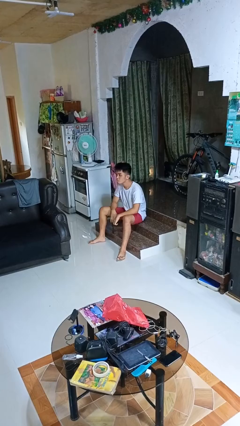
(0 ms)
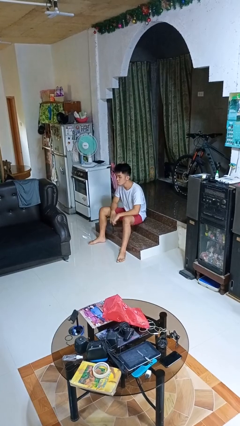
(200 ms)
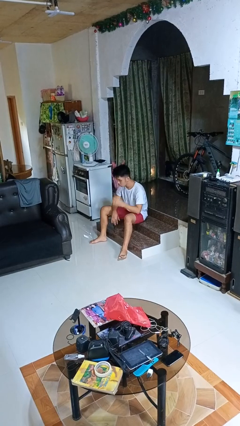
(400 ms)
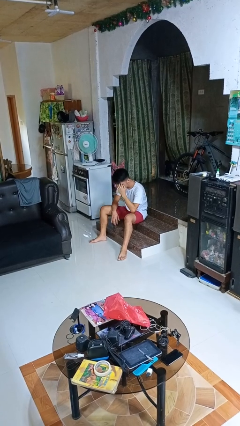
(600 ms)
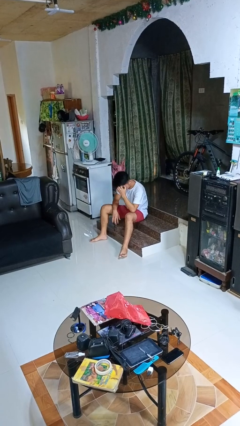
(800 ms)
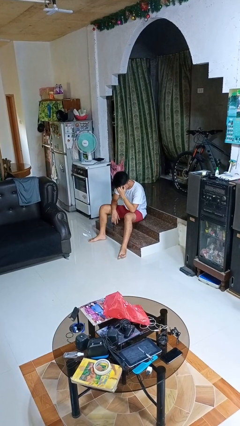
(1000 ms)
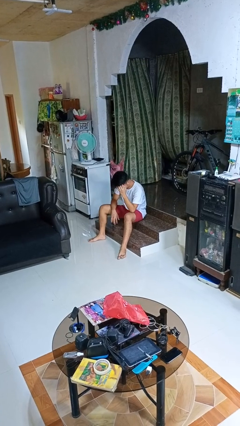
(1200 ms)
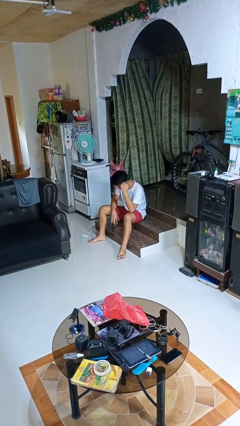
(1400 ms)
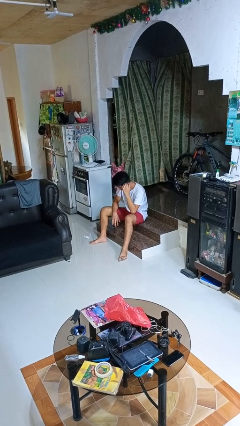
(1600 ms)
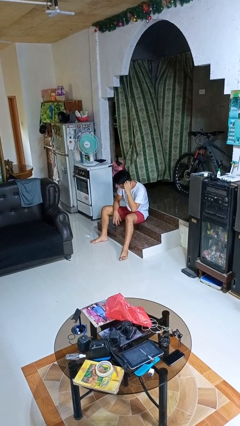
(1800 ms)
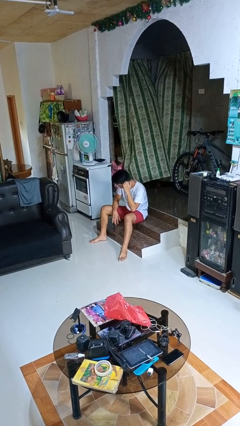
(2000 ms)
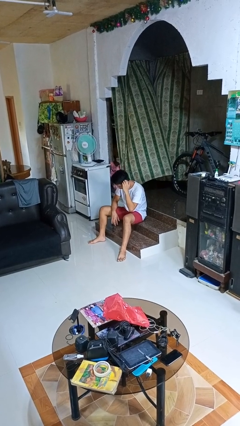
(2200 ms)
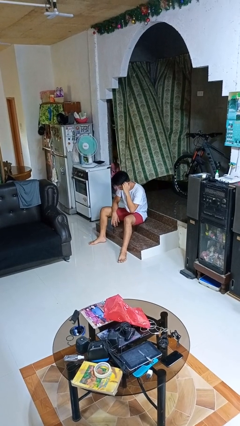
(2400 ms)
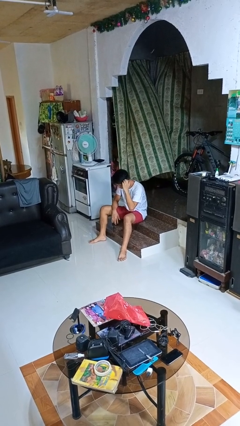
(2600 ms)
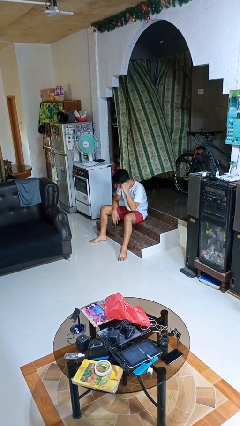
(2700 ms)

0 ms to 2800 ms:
person scratches face

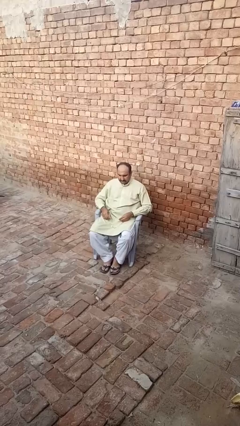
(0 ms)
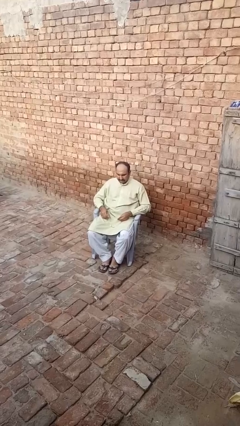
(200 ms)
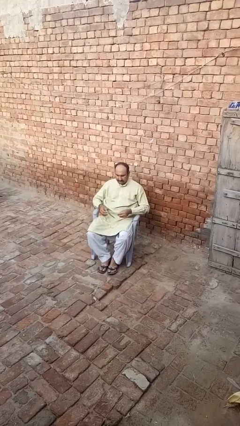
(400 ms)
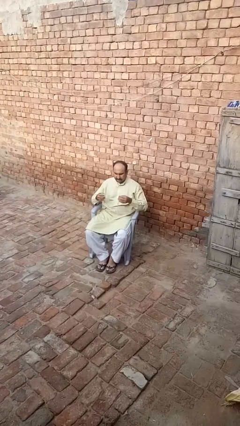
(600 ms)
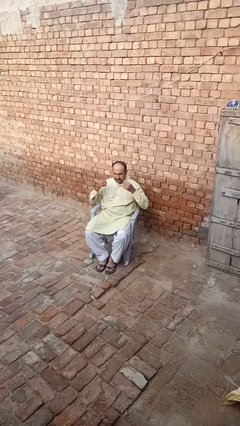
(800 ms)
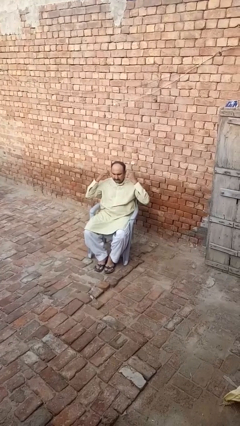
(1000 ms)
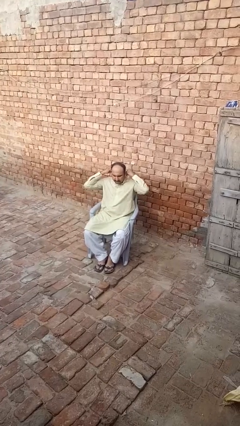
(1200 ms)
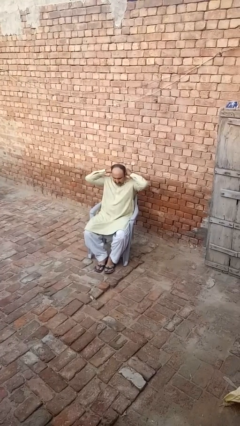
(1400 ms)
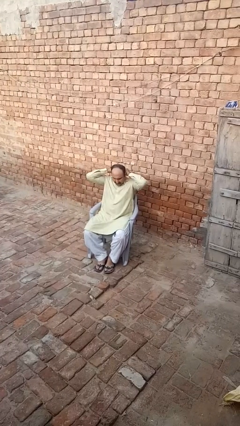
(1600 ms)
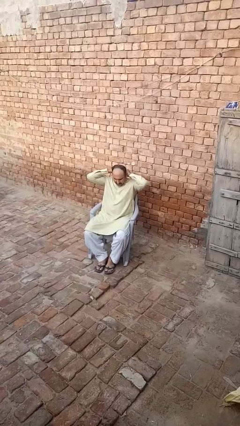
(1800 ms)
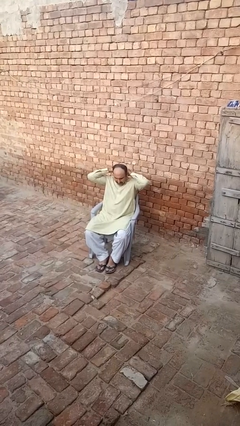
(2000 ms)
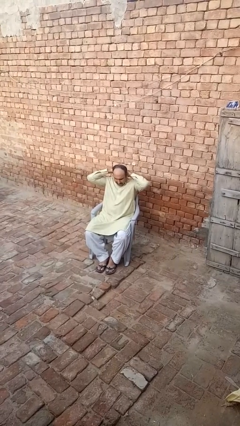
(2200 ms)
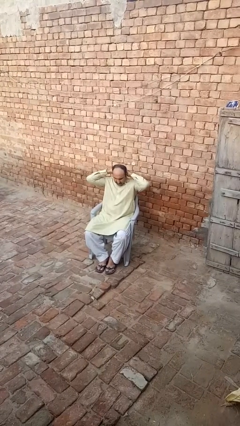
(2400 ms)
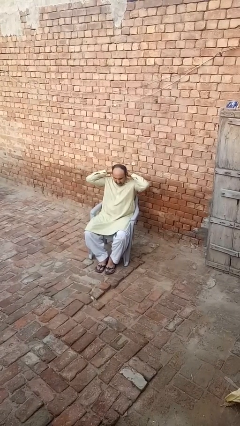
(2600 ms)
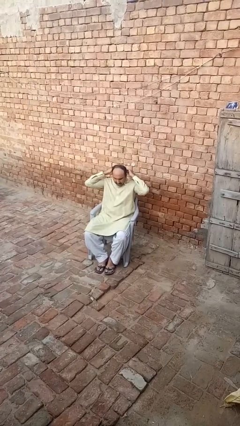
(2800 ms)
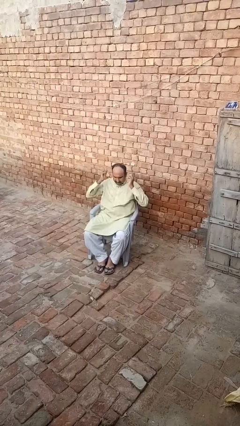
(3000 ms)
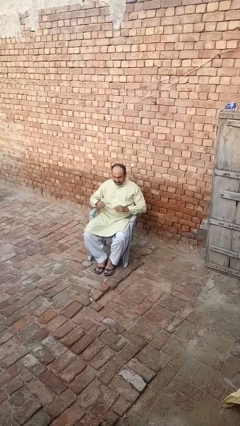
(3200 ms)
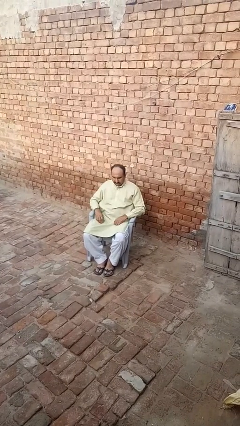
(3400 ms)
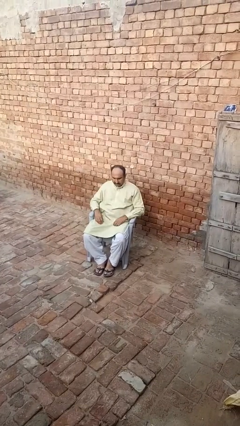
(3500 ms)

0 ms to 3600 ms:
person puts on necklace

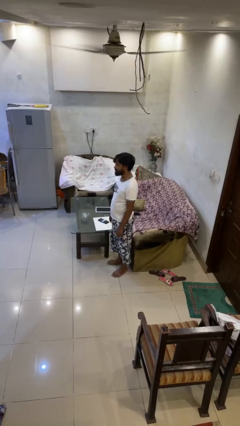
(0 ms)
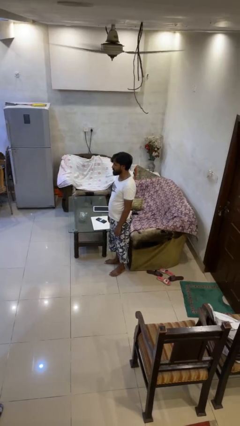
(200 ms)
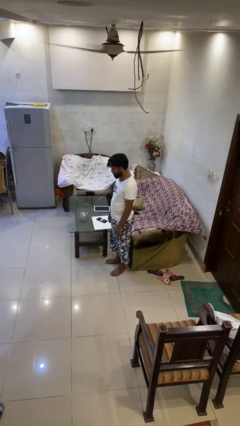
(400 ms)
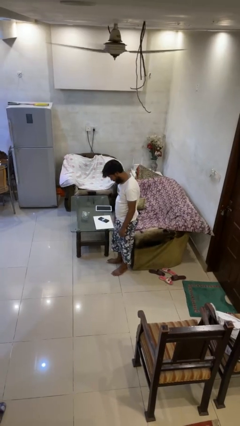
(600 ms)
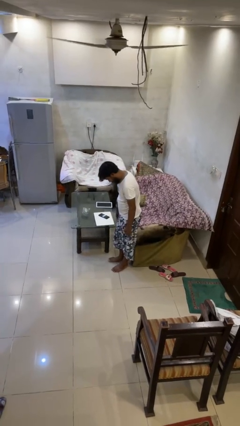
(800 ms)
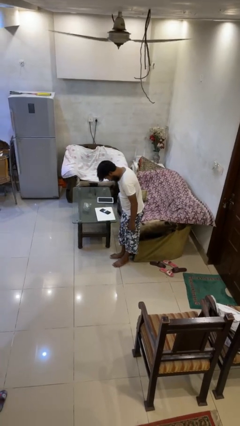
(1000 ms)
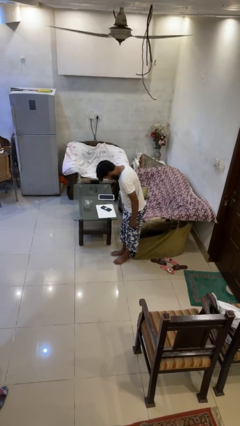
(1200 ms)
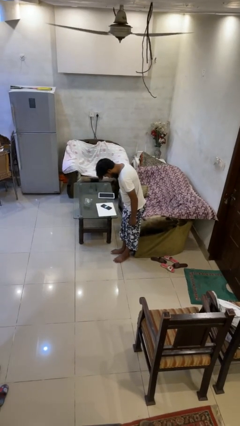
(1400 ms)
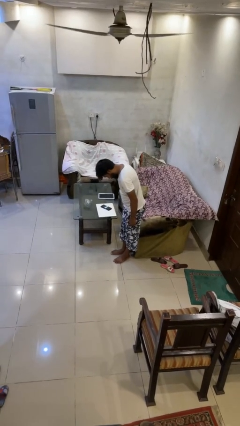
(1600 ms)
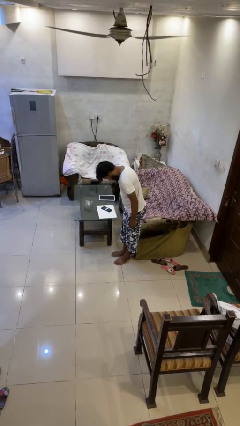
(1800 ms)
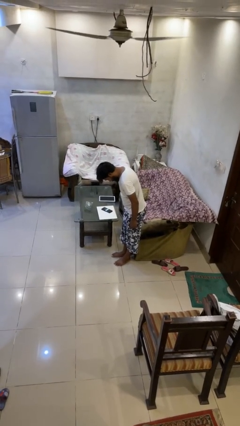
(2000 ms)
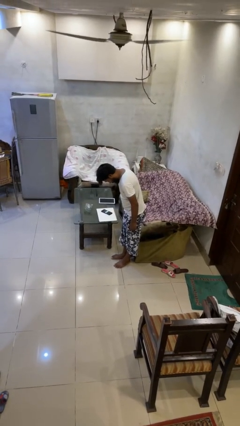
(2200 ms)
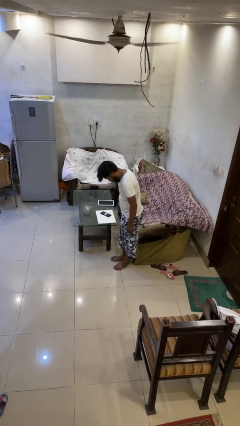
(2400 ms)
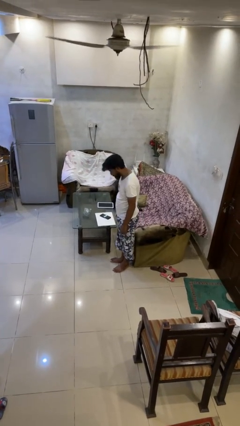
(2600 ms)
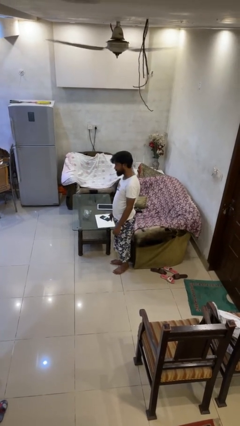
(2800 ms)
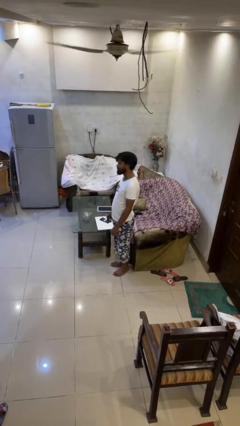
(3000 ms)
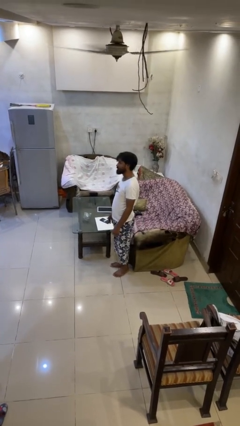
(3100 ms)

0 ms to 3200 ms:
person bows

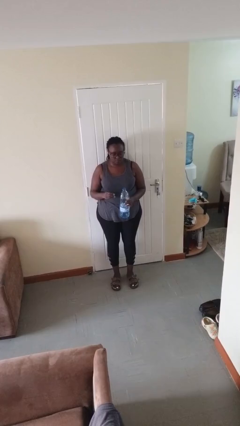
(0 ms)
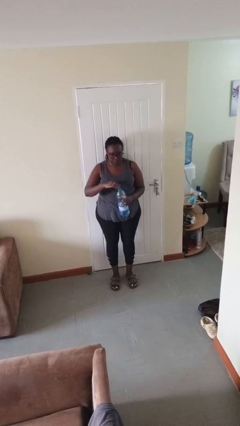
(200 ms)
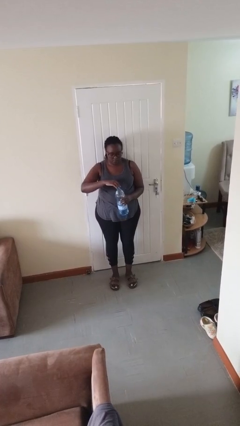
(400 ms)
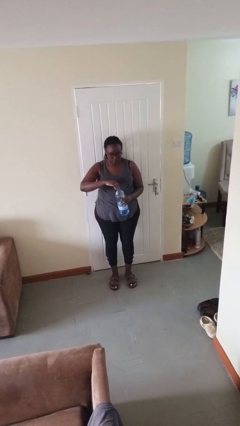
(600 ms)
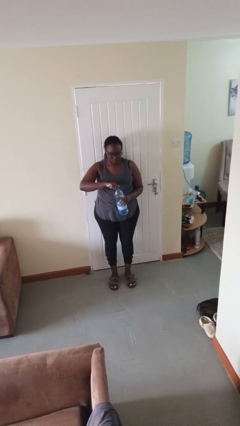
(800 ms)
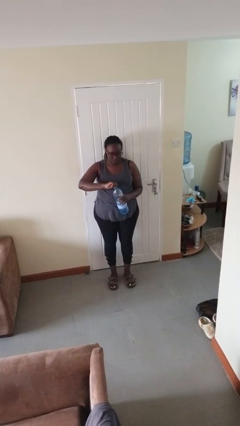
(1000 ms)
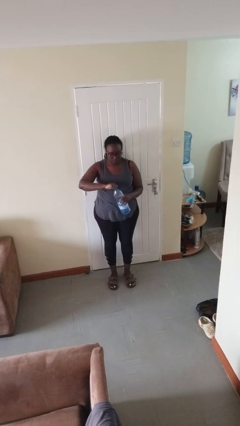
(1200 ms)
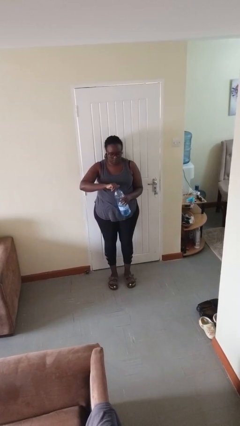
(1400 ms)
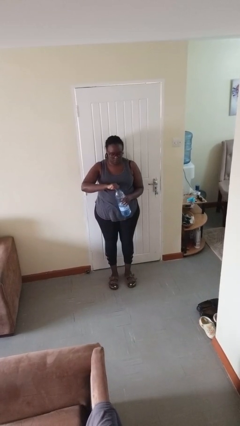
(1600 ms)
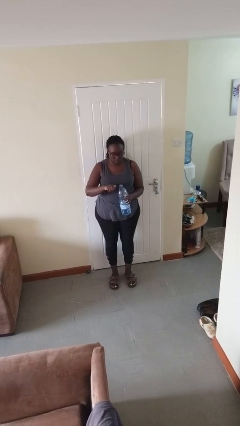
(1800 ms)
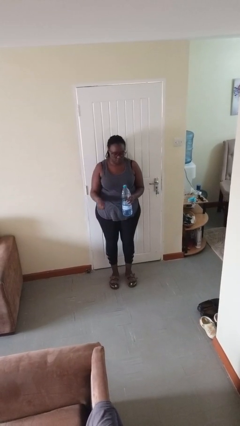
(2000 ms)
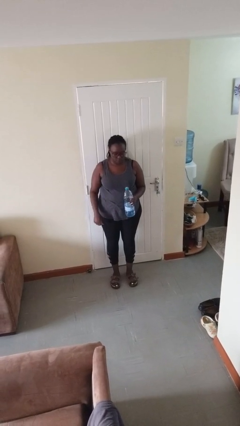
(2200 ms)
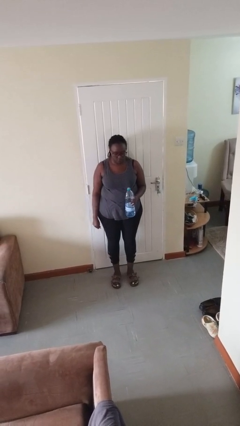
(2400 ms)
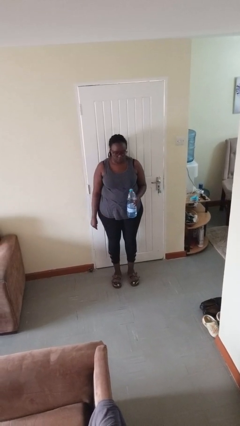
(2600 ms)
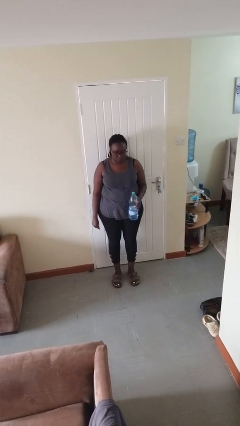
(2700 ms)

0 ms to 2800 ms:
person screws lid to bottle

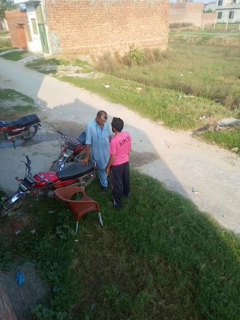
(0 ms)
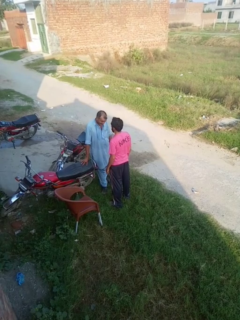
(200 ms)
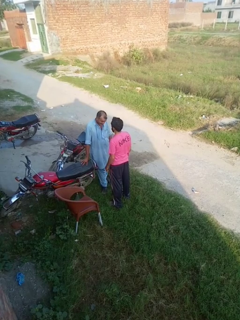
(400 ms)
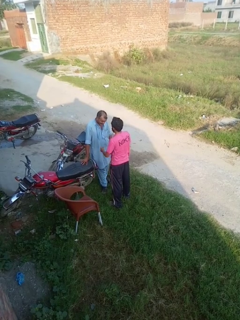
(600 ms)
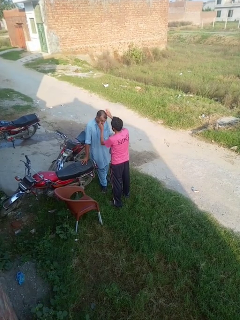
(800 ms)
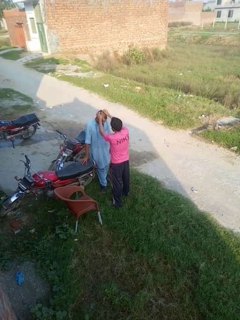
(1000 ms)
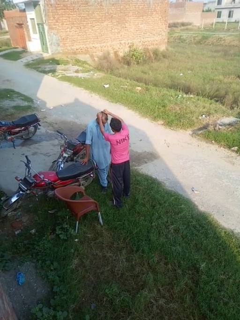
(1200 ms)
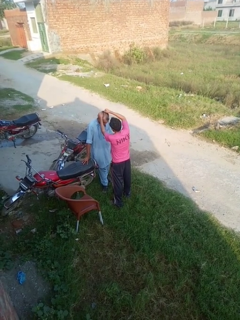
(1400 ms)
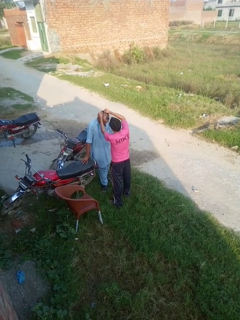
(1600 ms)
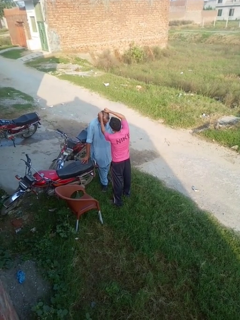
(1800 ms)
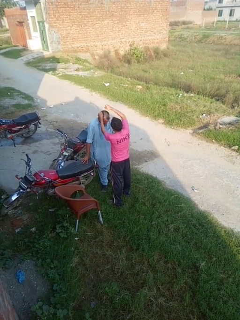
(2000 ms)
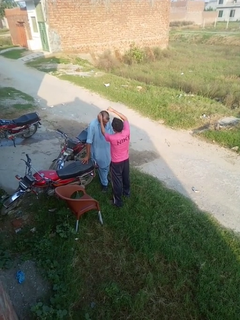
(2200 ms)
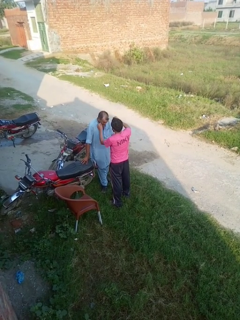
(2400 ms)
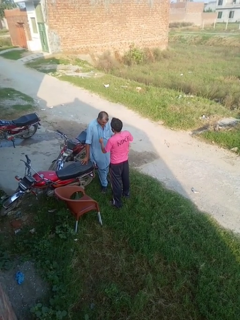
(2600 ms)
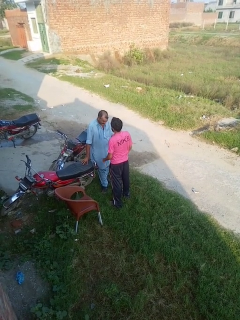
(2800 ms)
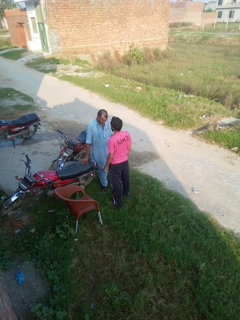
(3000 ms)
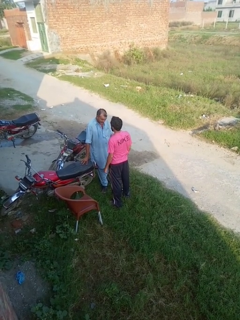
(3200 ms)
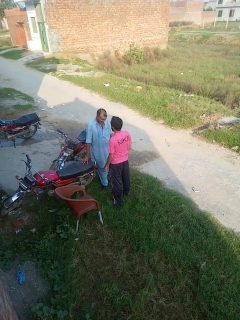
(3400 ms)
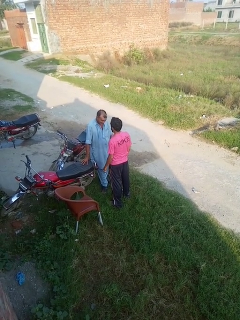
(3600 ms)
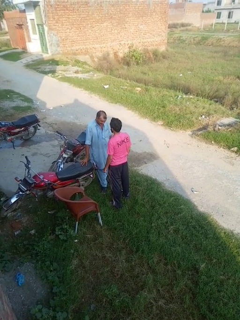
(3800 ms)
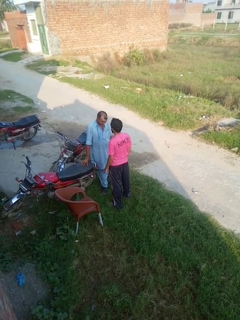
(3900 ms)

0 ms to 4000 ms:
person grabs person by hair

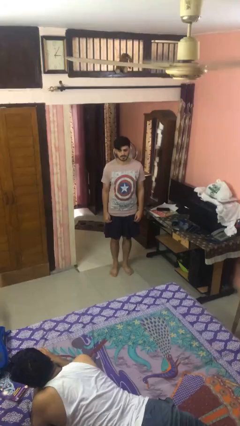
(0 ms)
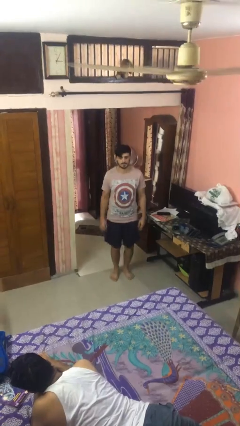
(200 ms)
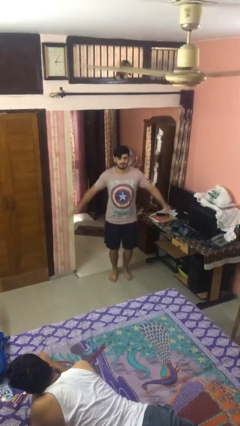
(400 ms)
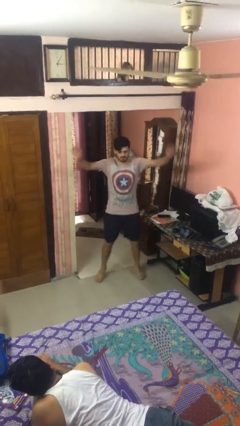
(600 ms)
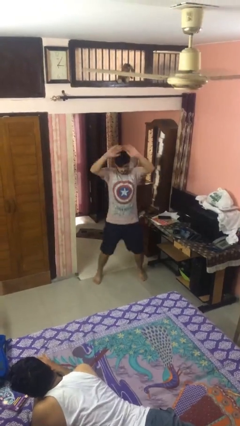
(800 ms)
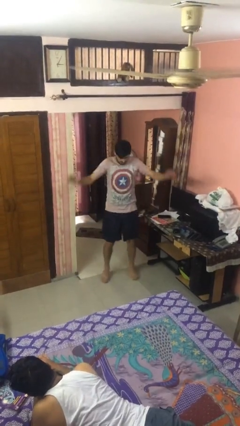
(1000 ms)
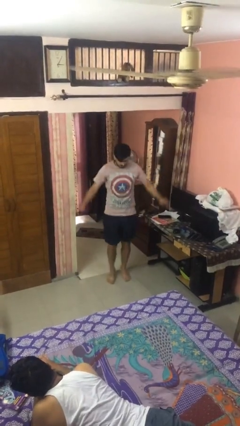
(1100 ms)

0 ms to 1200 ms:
person exercises with jumping jacks

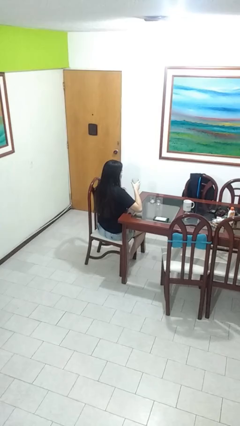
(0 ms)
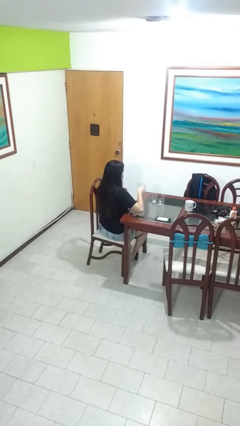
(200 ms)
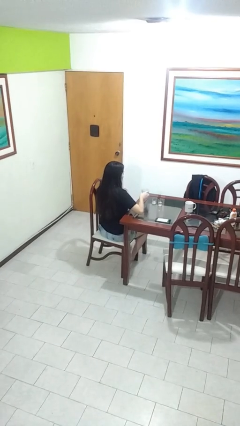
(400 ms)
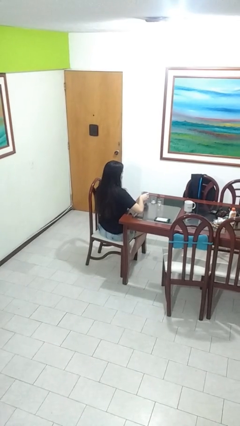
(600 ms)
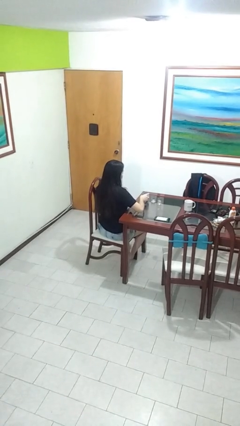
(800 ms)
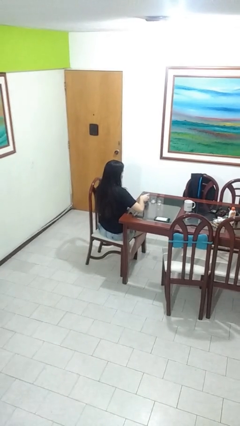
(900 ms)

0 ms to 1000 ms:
person puts down object on table
